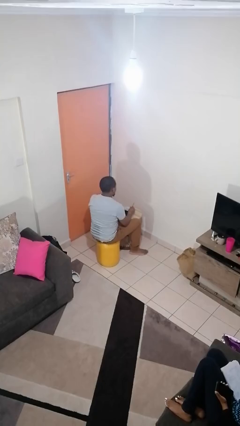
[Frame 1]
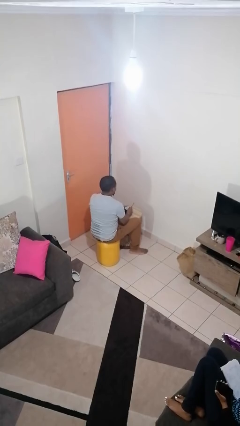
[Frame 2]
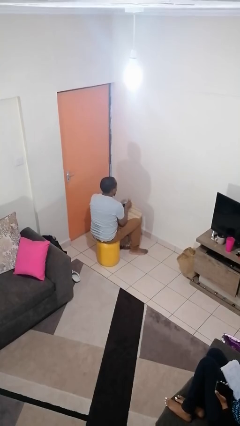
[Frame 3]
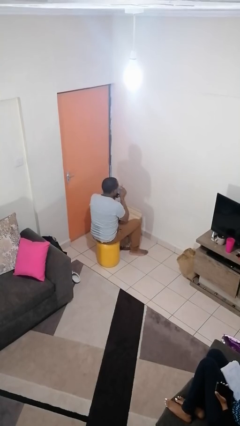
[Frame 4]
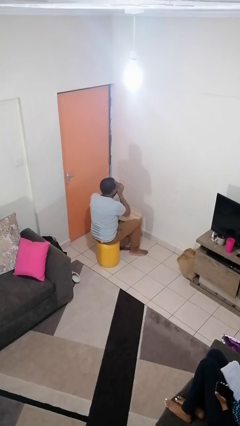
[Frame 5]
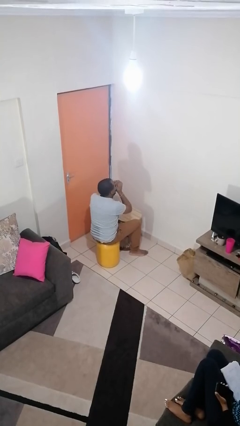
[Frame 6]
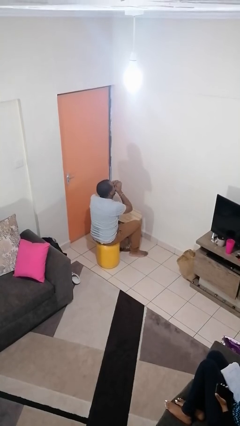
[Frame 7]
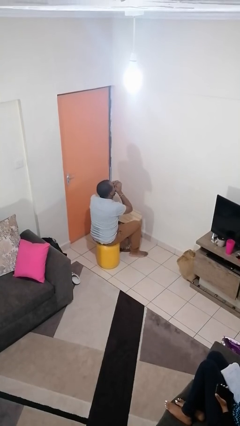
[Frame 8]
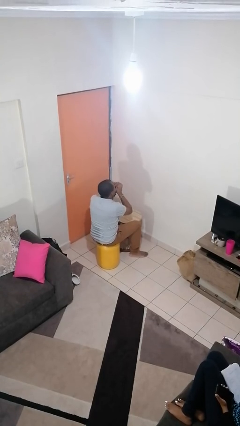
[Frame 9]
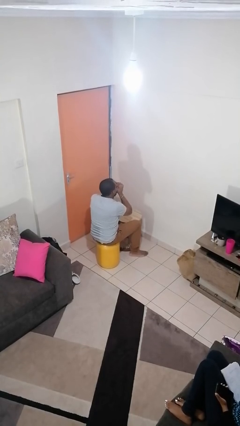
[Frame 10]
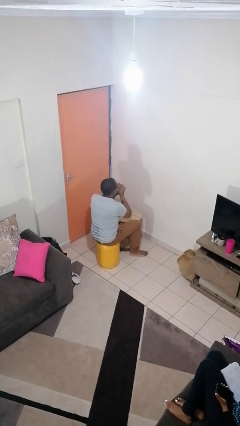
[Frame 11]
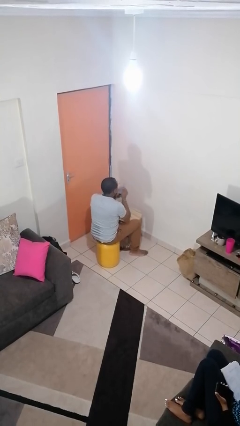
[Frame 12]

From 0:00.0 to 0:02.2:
person drinks from mug

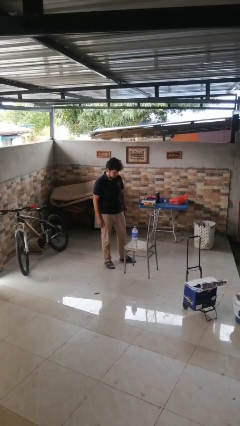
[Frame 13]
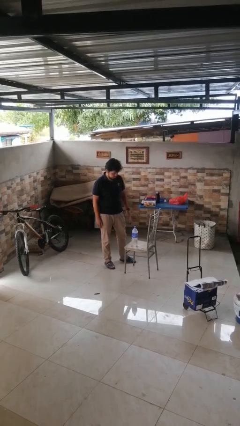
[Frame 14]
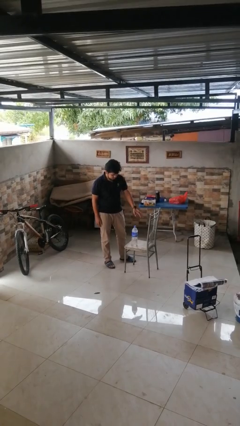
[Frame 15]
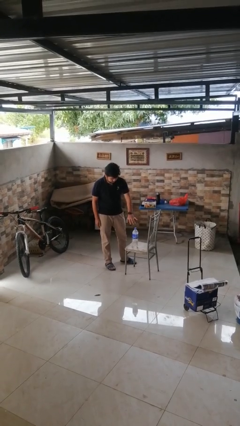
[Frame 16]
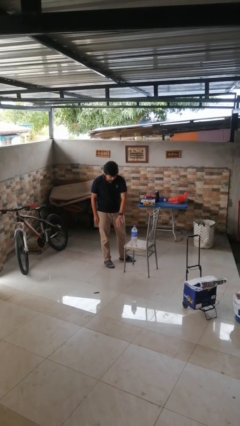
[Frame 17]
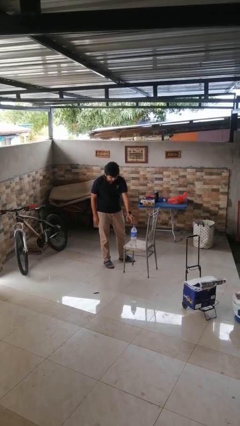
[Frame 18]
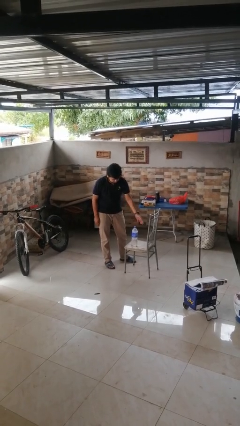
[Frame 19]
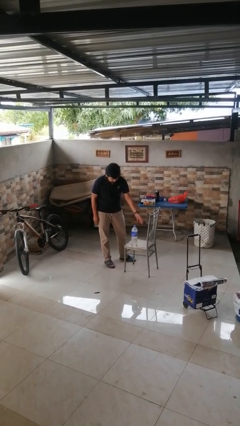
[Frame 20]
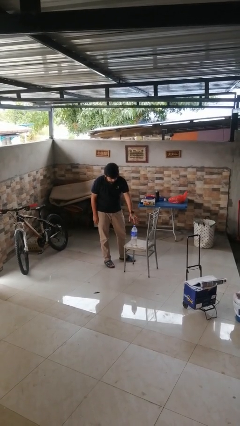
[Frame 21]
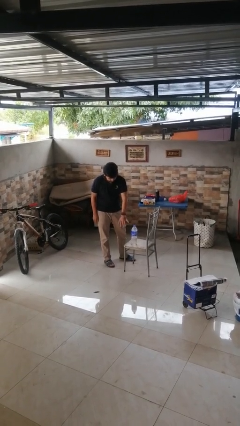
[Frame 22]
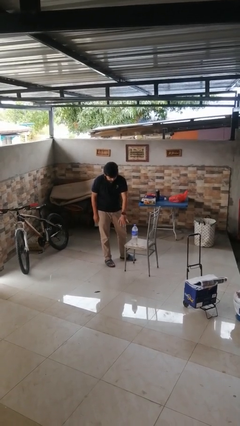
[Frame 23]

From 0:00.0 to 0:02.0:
person waves hand over object

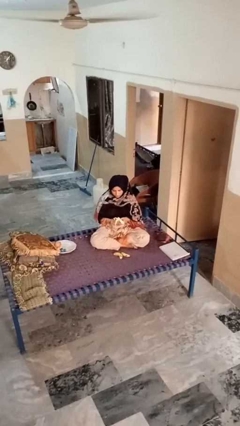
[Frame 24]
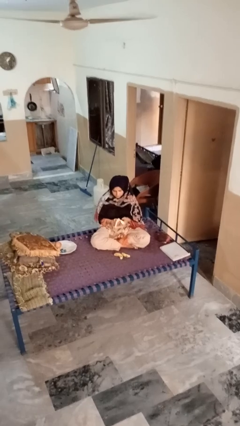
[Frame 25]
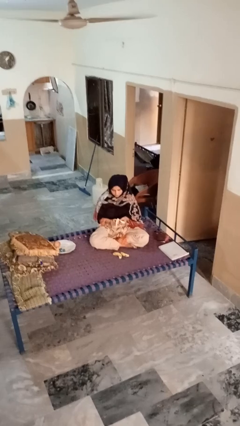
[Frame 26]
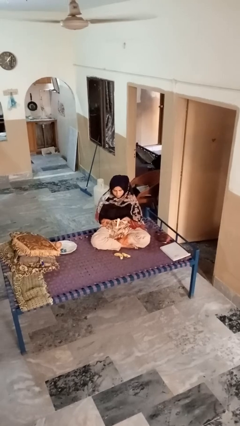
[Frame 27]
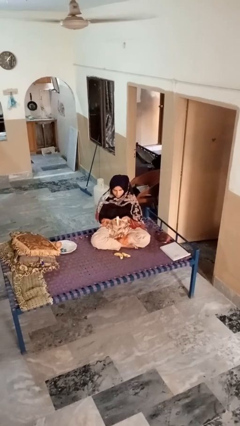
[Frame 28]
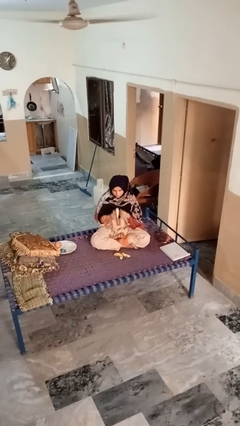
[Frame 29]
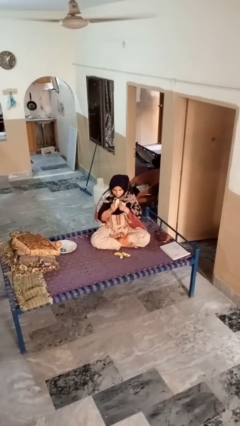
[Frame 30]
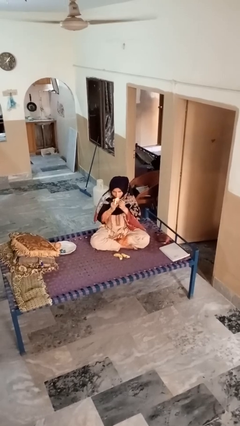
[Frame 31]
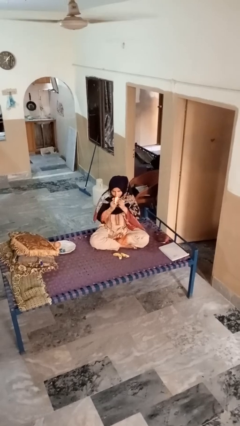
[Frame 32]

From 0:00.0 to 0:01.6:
person eats banana

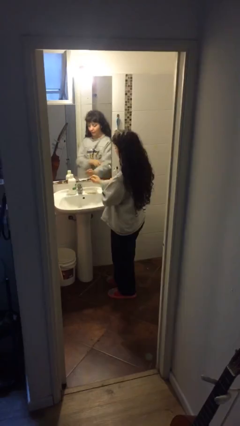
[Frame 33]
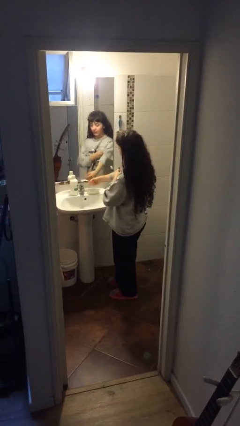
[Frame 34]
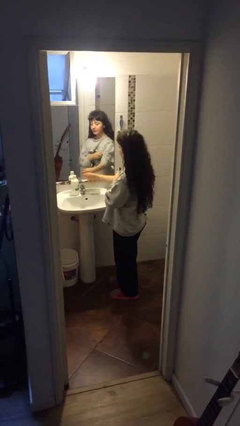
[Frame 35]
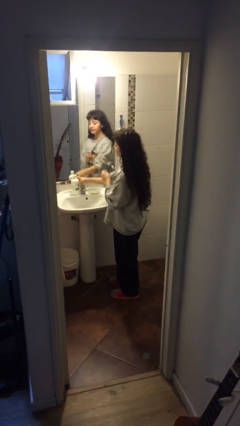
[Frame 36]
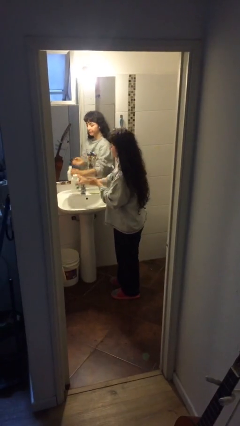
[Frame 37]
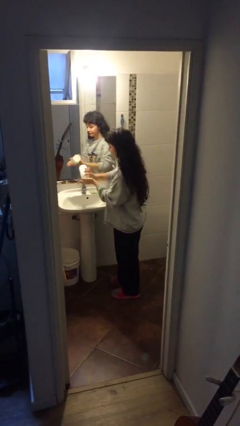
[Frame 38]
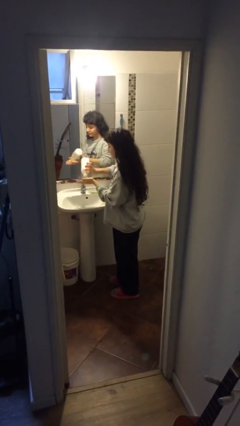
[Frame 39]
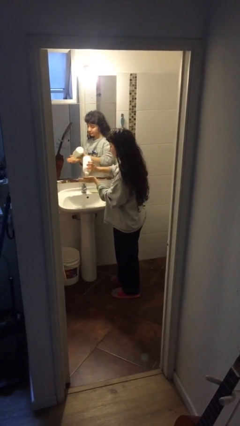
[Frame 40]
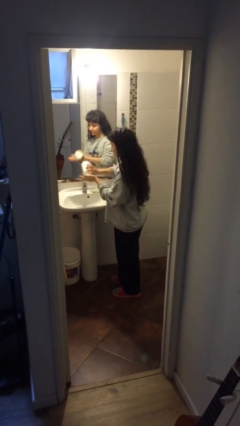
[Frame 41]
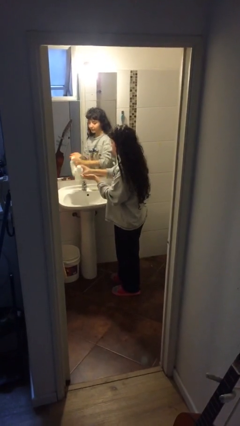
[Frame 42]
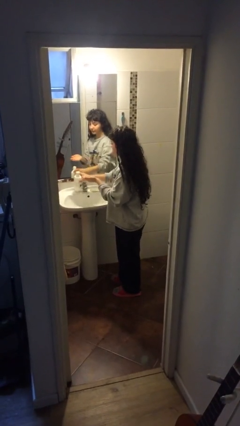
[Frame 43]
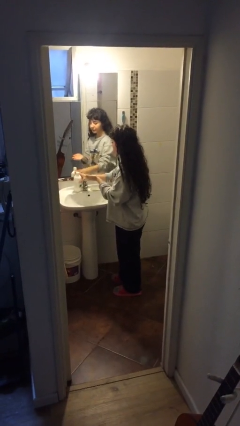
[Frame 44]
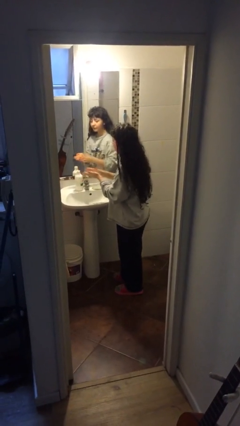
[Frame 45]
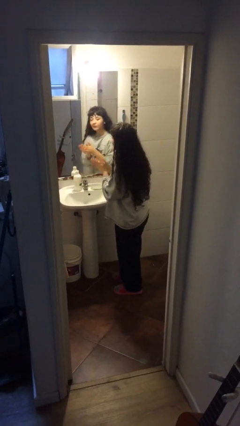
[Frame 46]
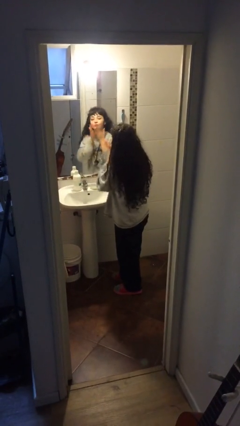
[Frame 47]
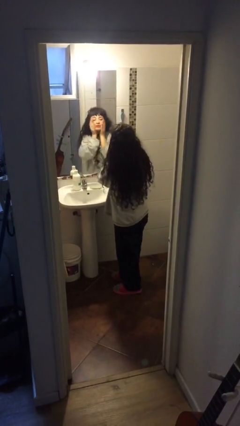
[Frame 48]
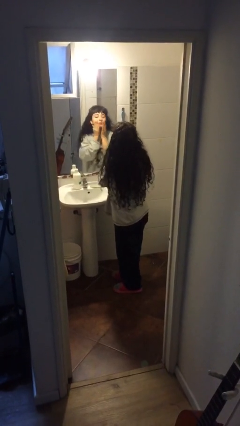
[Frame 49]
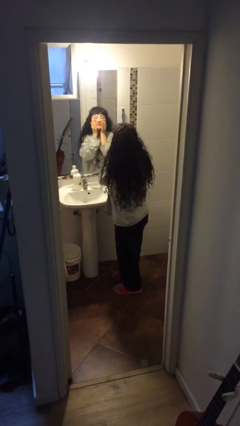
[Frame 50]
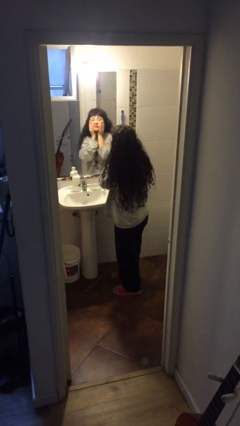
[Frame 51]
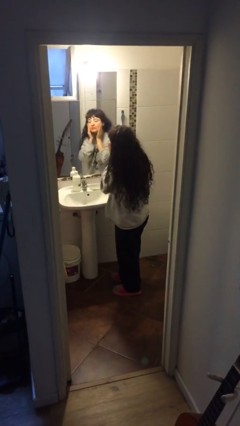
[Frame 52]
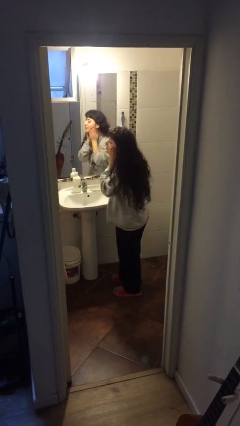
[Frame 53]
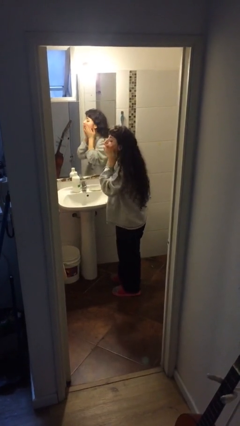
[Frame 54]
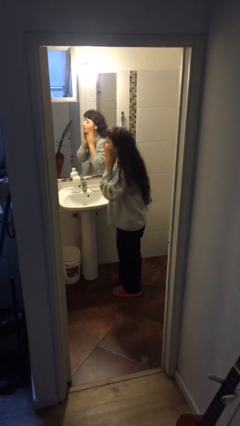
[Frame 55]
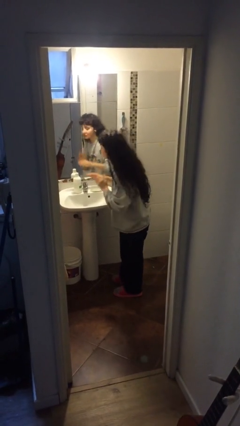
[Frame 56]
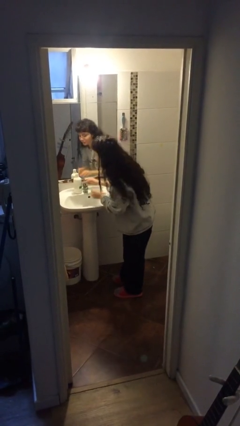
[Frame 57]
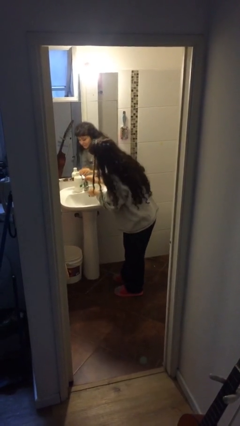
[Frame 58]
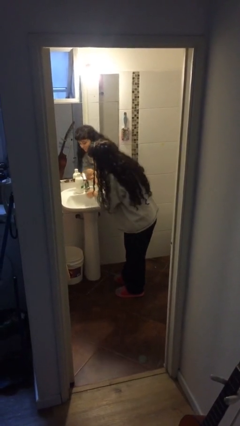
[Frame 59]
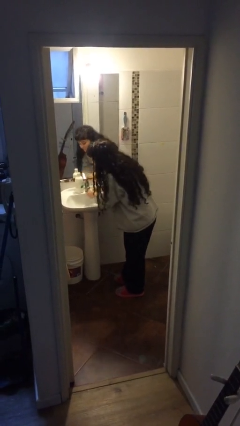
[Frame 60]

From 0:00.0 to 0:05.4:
person washes face

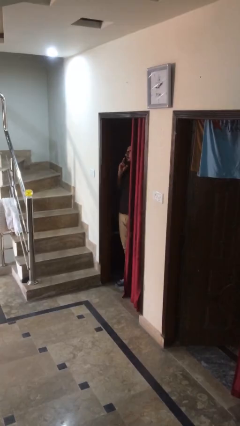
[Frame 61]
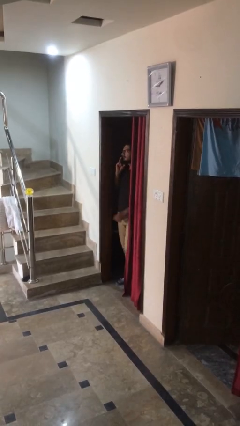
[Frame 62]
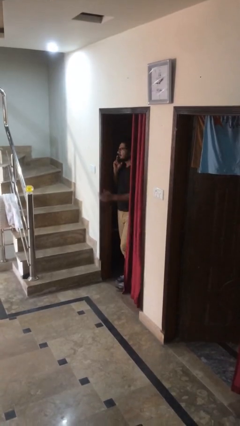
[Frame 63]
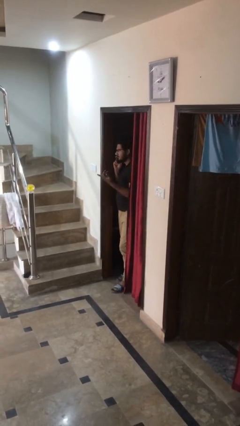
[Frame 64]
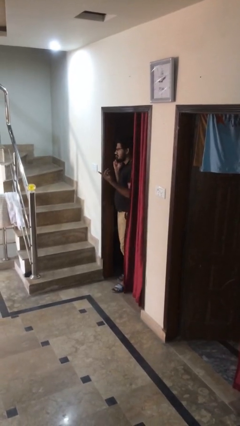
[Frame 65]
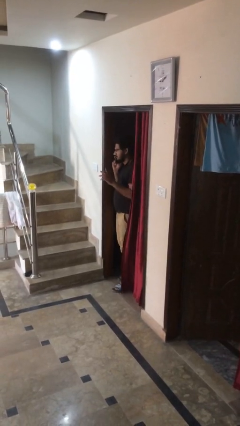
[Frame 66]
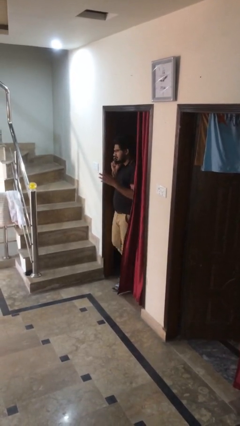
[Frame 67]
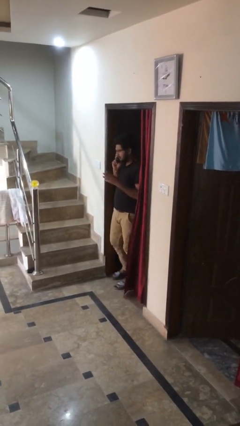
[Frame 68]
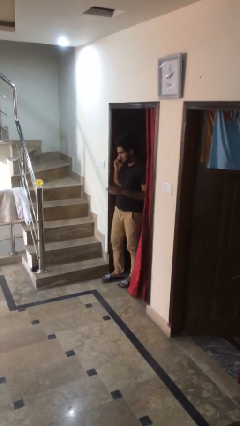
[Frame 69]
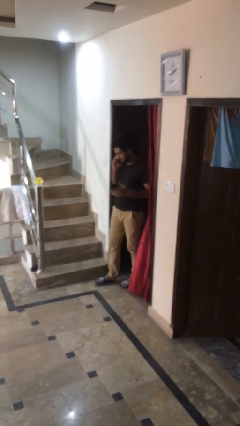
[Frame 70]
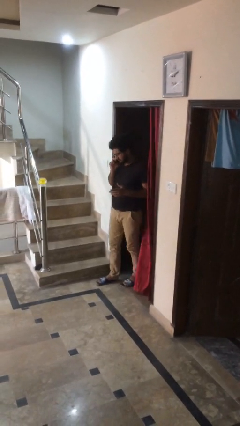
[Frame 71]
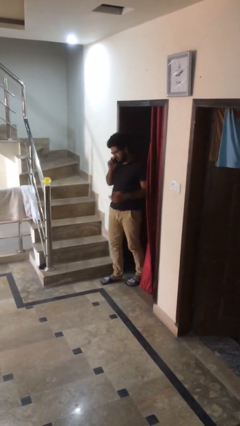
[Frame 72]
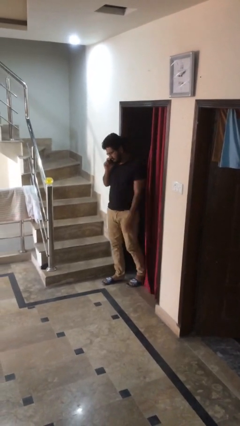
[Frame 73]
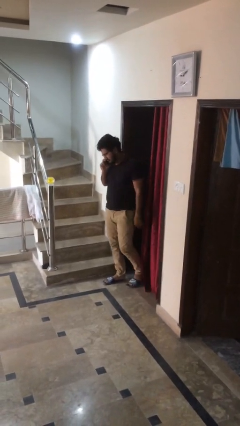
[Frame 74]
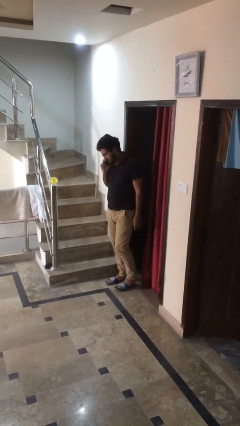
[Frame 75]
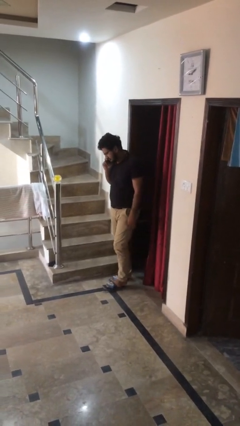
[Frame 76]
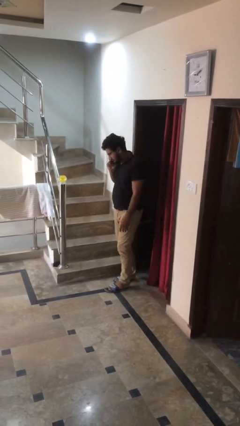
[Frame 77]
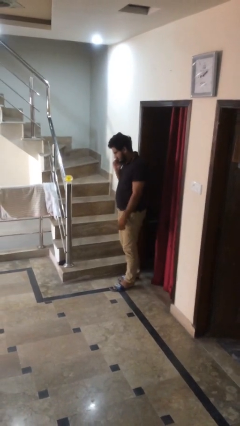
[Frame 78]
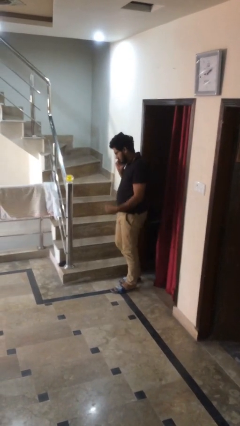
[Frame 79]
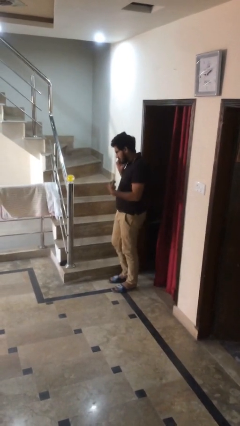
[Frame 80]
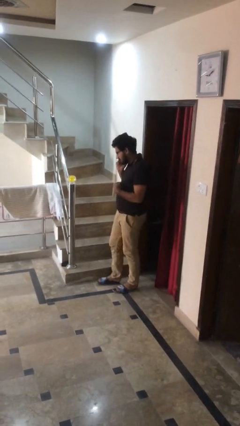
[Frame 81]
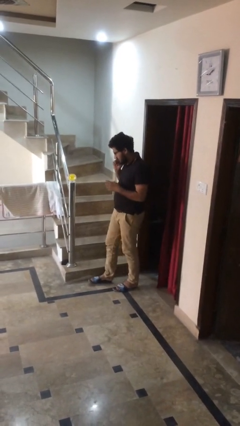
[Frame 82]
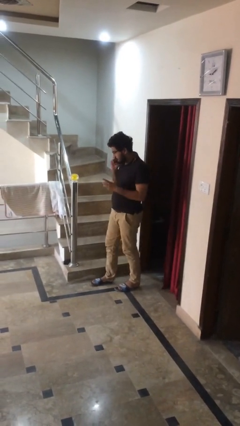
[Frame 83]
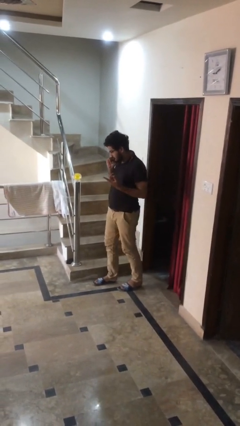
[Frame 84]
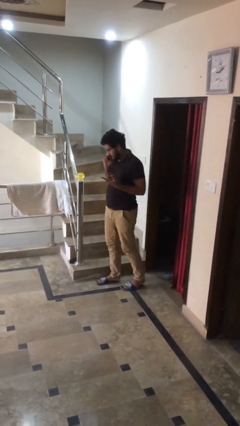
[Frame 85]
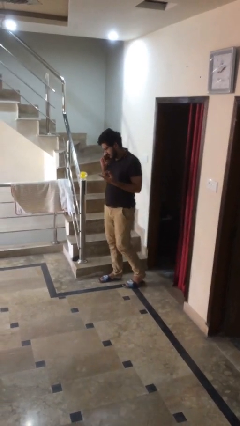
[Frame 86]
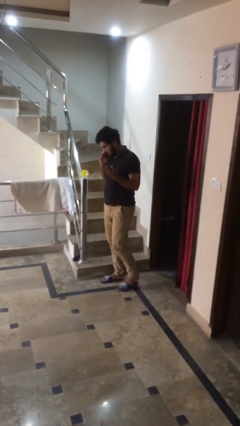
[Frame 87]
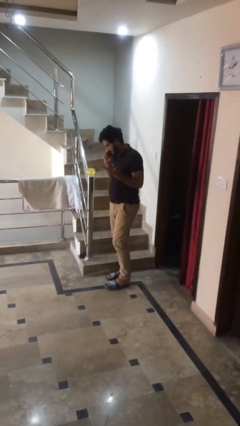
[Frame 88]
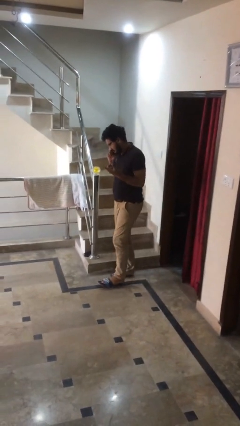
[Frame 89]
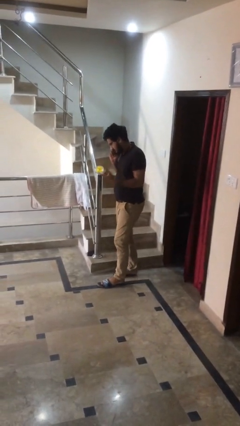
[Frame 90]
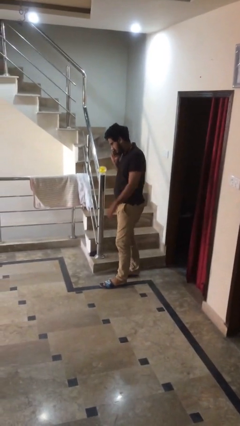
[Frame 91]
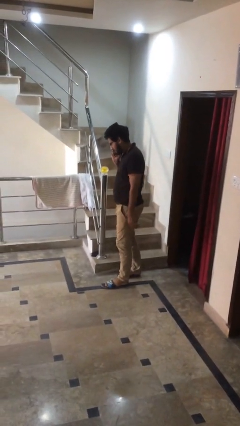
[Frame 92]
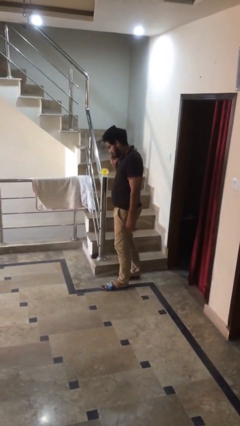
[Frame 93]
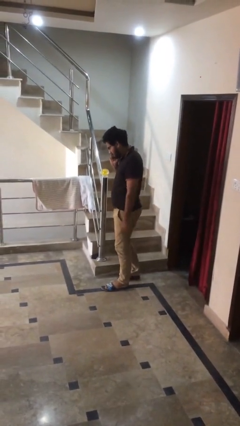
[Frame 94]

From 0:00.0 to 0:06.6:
person enters scene through structure
